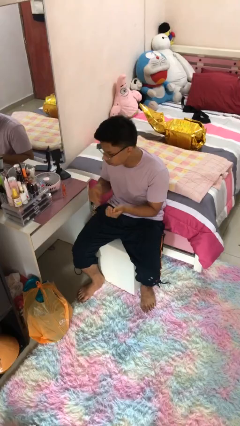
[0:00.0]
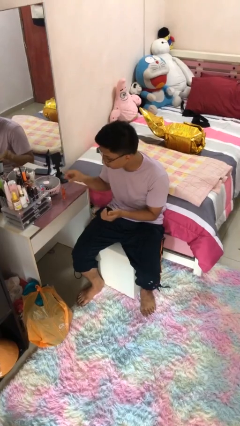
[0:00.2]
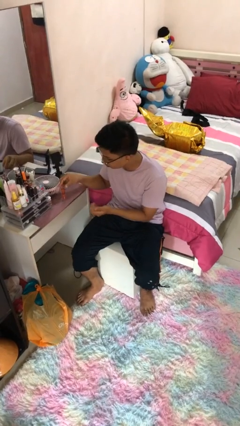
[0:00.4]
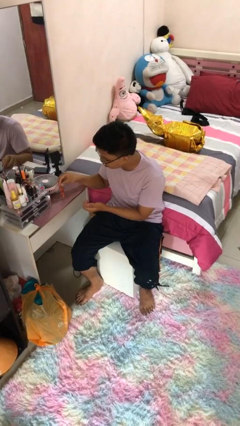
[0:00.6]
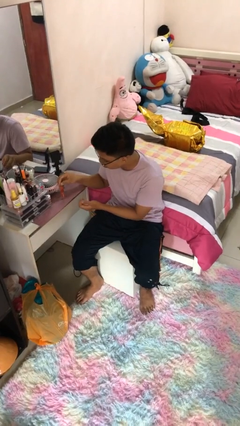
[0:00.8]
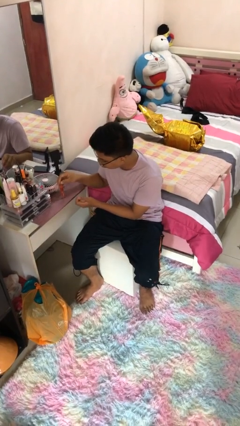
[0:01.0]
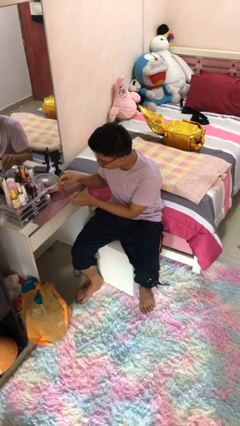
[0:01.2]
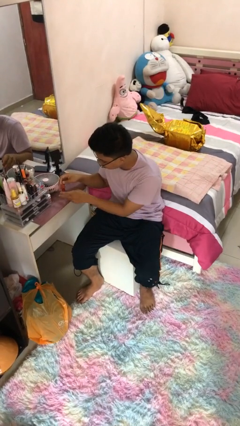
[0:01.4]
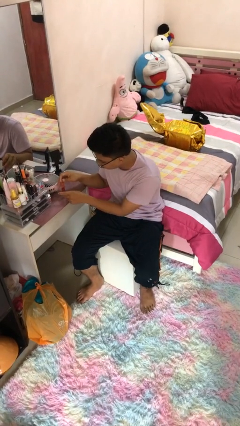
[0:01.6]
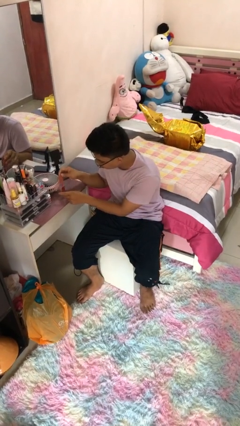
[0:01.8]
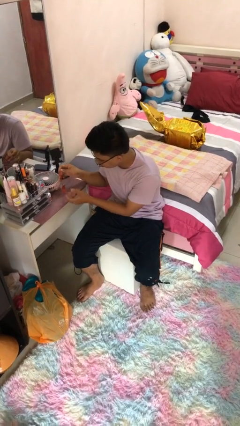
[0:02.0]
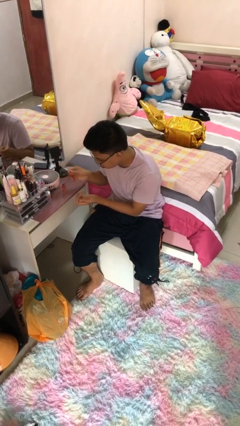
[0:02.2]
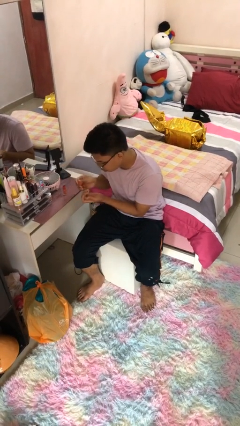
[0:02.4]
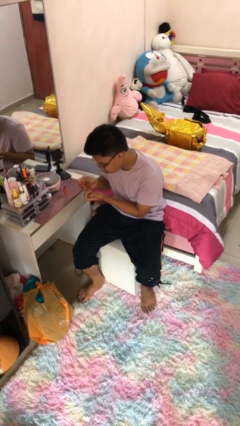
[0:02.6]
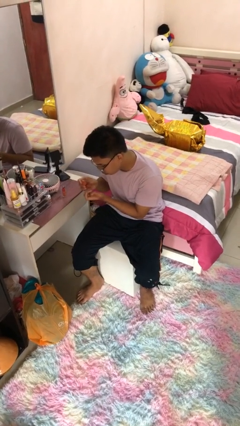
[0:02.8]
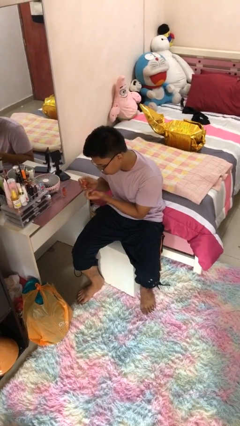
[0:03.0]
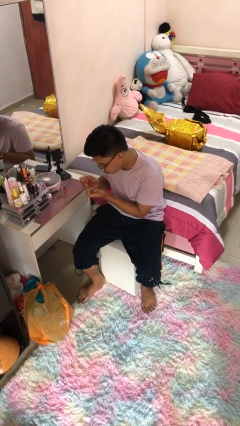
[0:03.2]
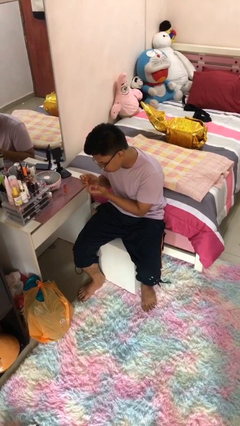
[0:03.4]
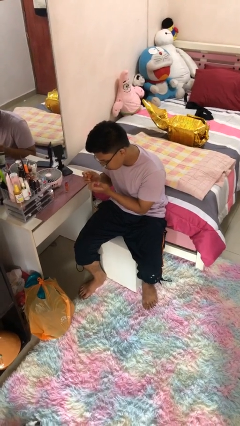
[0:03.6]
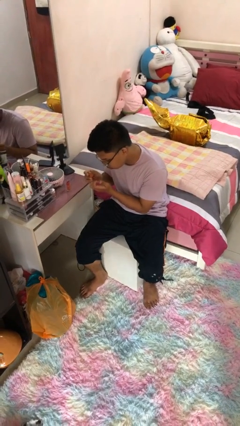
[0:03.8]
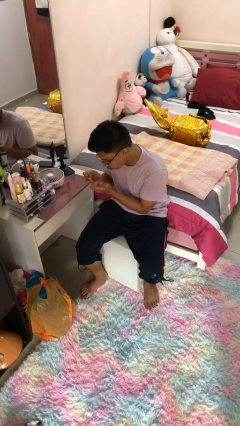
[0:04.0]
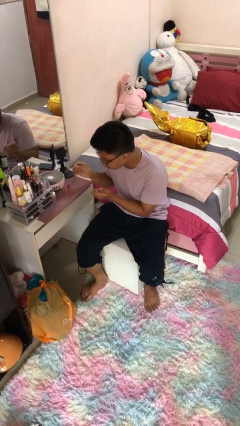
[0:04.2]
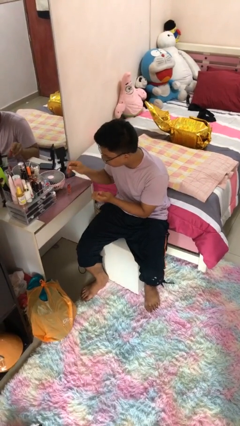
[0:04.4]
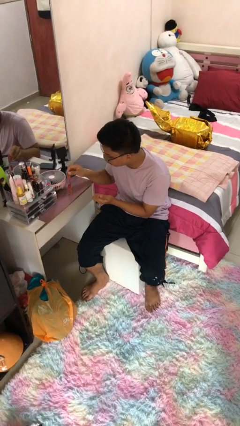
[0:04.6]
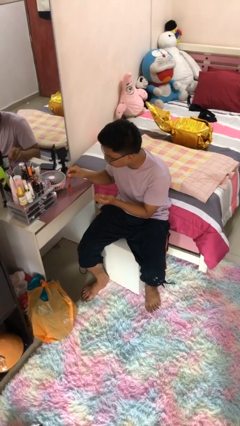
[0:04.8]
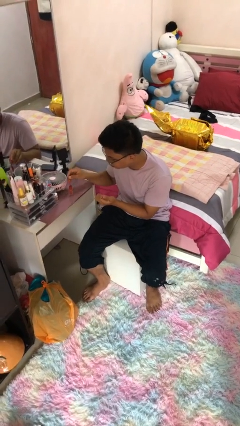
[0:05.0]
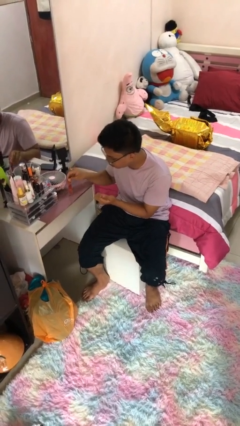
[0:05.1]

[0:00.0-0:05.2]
person paints fingernails

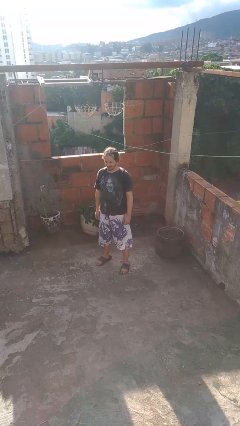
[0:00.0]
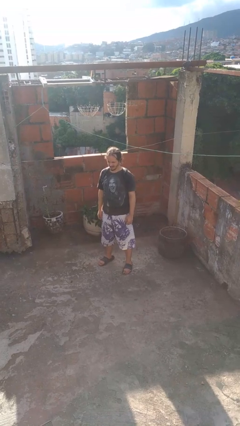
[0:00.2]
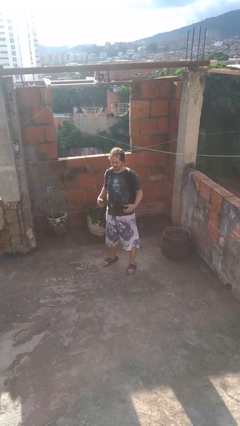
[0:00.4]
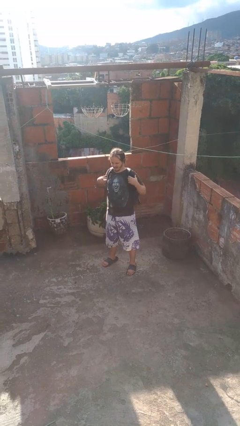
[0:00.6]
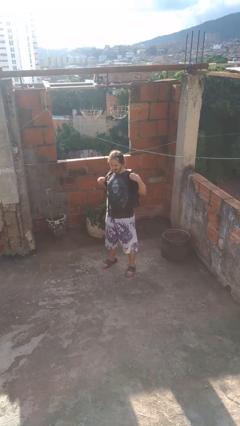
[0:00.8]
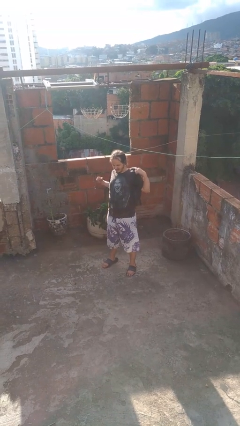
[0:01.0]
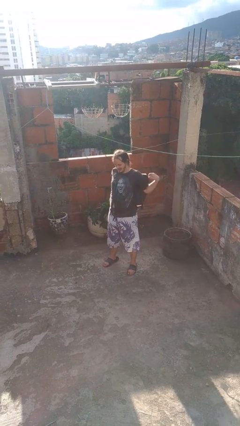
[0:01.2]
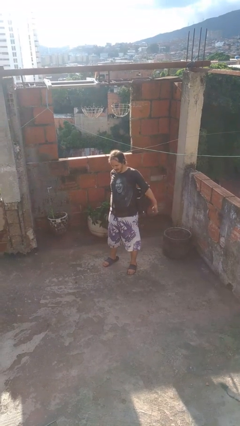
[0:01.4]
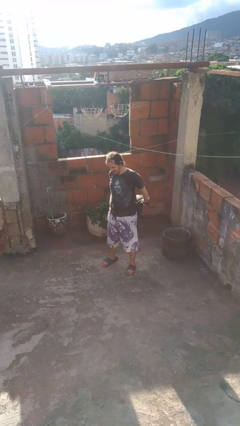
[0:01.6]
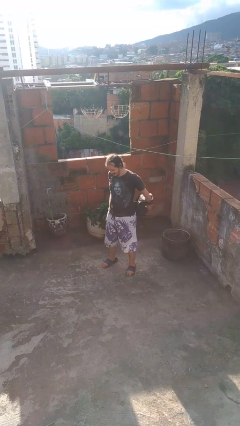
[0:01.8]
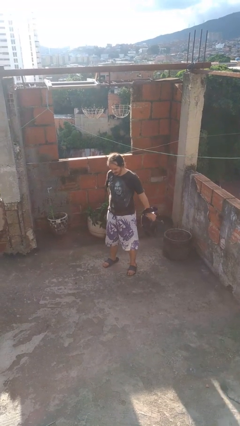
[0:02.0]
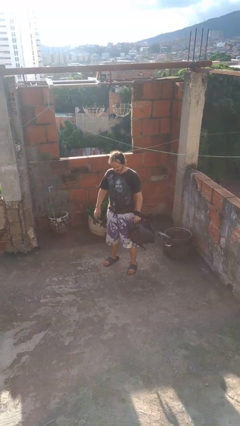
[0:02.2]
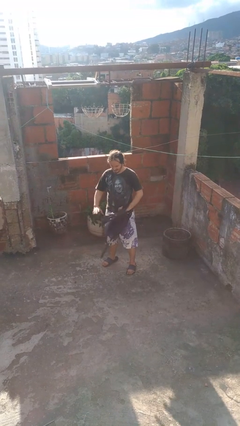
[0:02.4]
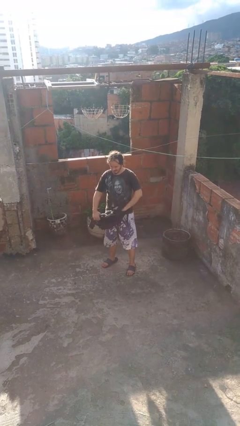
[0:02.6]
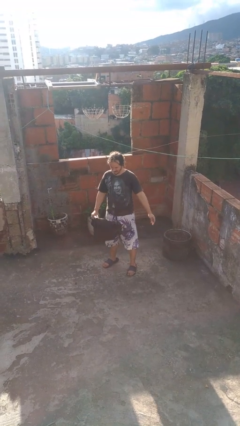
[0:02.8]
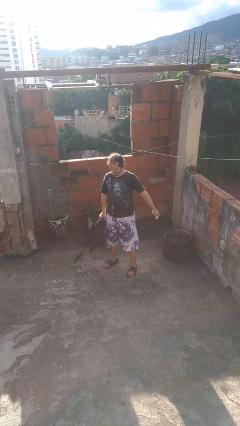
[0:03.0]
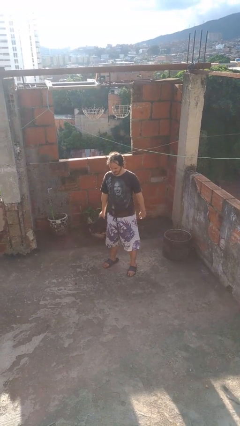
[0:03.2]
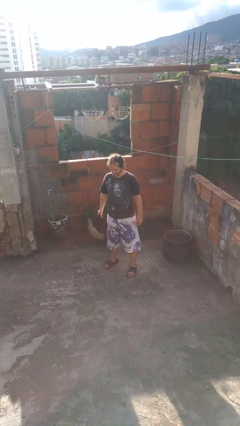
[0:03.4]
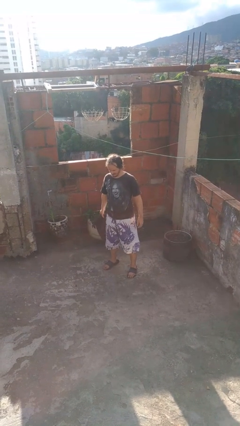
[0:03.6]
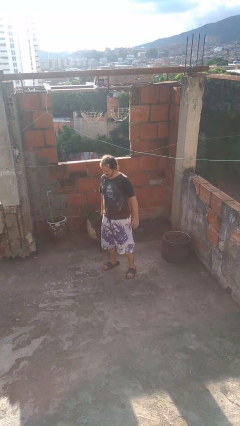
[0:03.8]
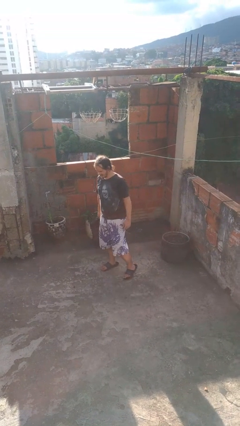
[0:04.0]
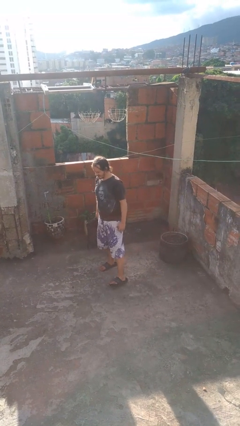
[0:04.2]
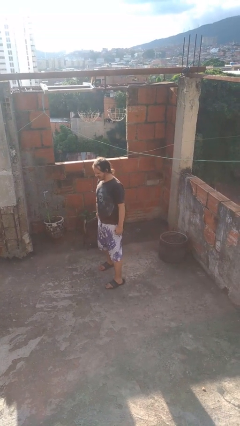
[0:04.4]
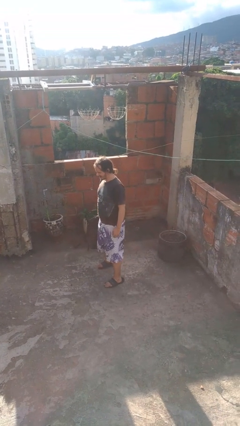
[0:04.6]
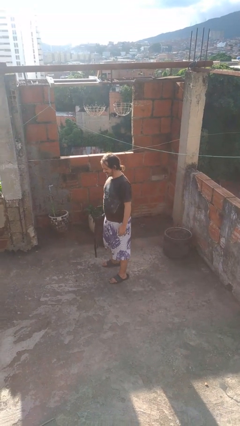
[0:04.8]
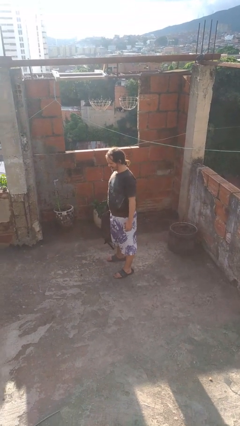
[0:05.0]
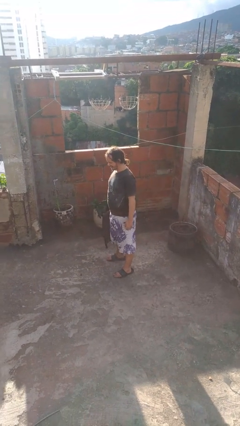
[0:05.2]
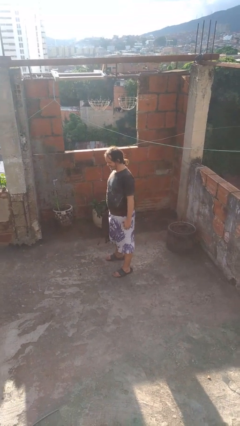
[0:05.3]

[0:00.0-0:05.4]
person takes off backpack

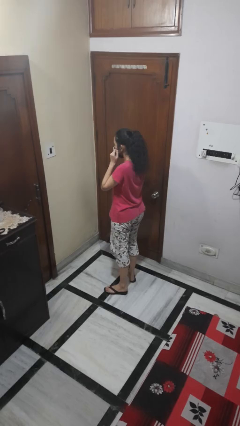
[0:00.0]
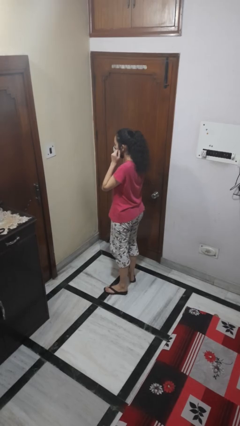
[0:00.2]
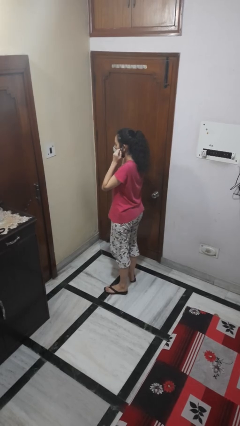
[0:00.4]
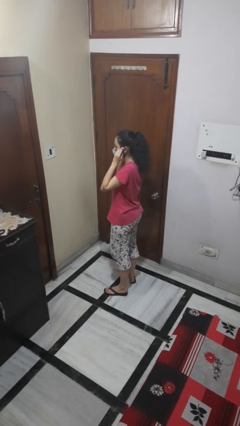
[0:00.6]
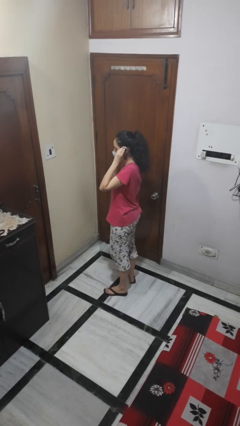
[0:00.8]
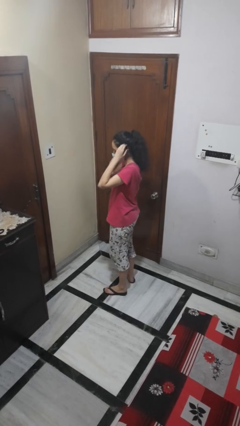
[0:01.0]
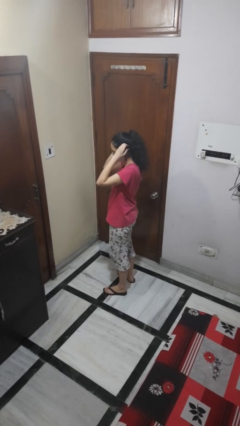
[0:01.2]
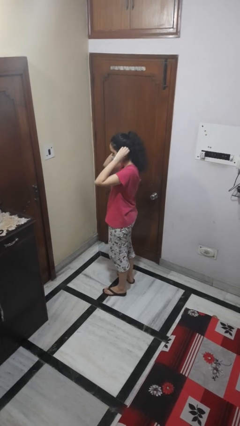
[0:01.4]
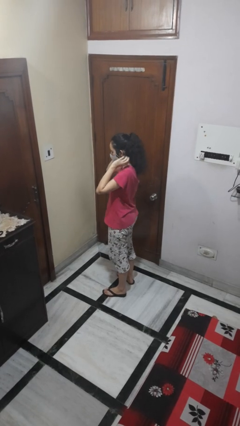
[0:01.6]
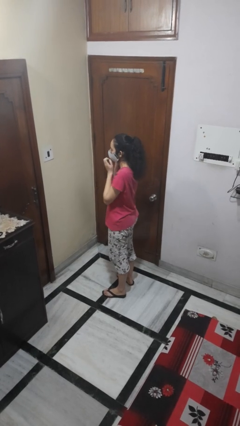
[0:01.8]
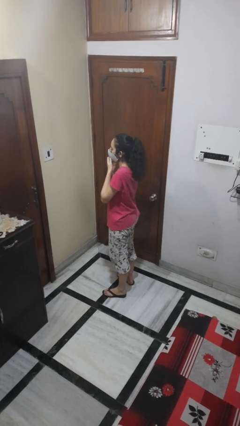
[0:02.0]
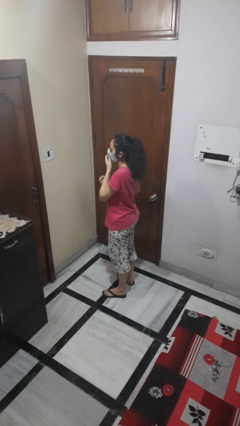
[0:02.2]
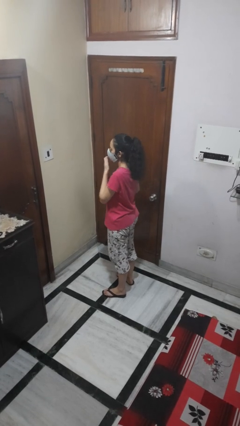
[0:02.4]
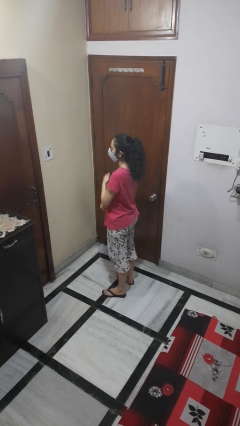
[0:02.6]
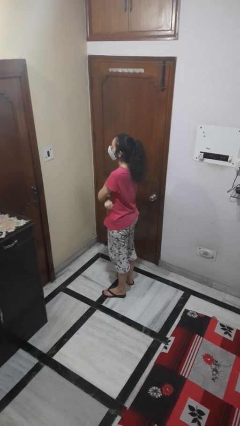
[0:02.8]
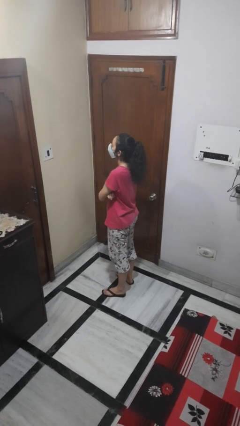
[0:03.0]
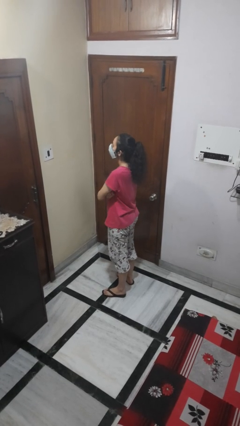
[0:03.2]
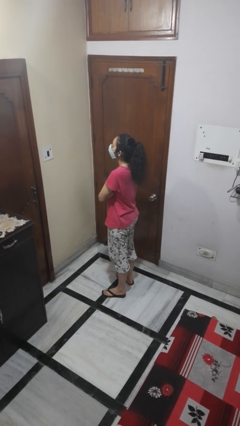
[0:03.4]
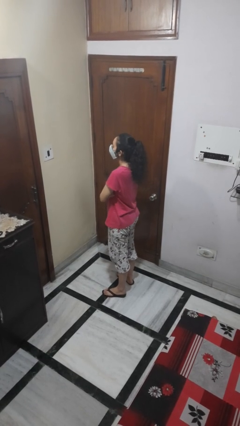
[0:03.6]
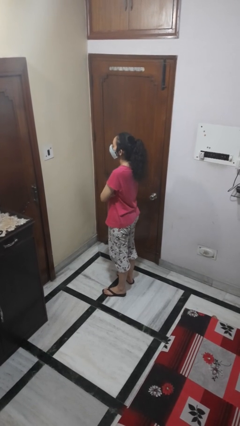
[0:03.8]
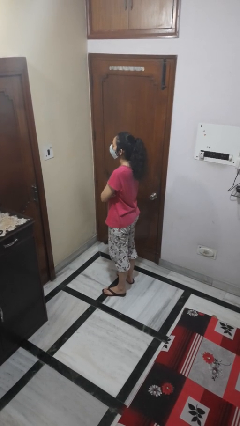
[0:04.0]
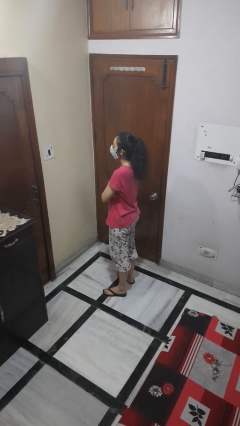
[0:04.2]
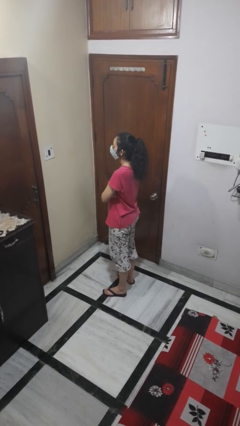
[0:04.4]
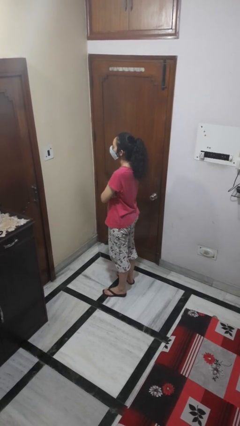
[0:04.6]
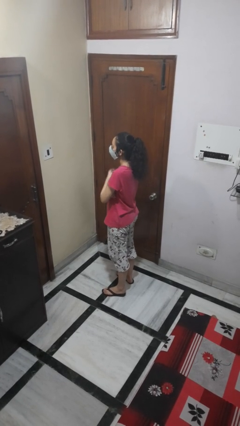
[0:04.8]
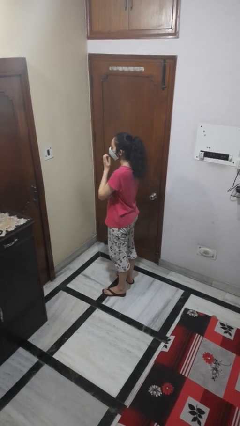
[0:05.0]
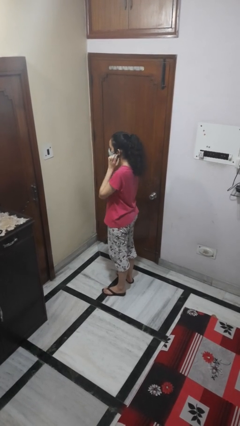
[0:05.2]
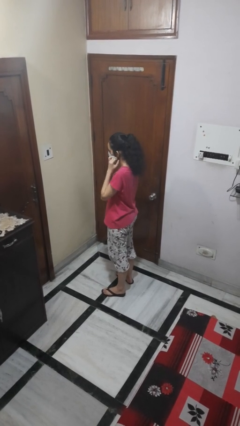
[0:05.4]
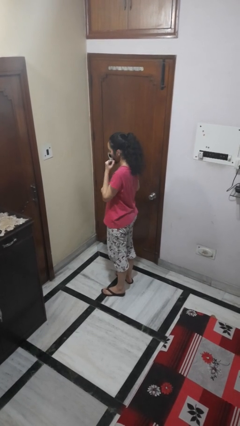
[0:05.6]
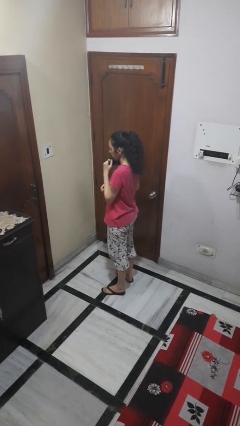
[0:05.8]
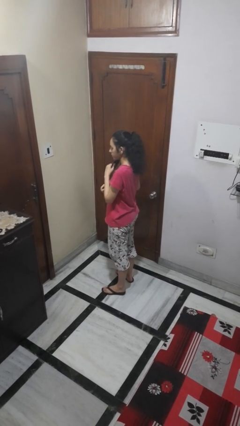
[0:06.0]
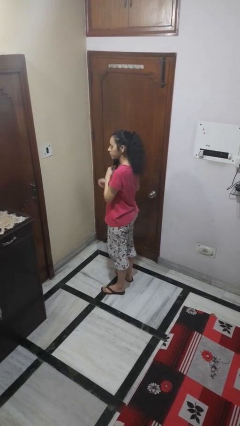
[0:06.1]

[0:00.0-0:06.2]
person puts on facemask

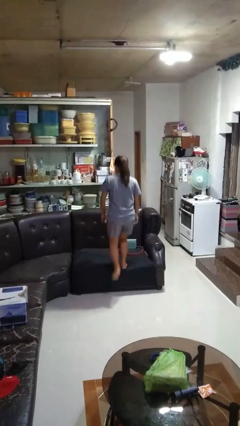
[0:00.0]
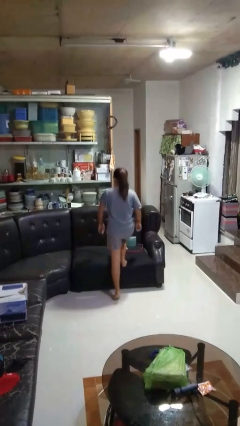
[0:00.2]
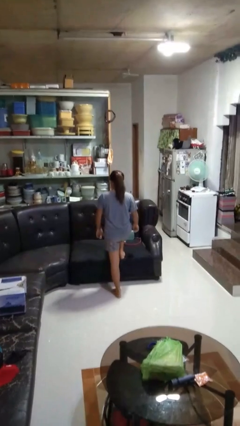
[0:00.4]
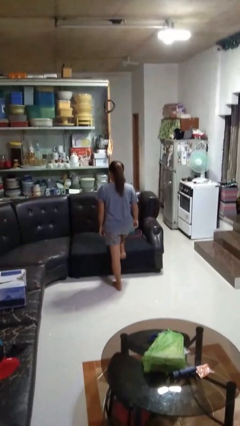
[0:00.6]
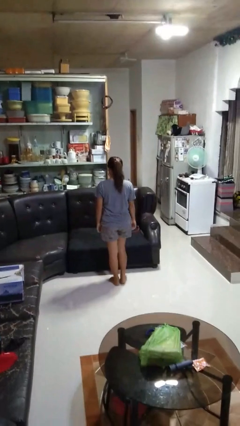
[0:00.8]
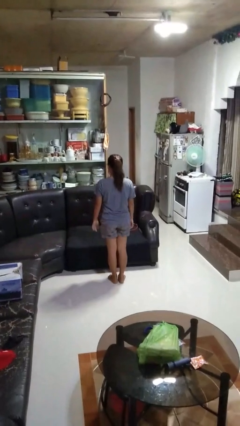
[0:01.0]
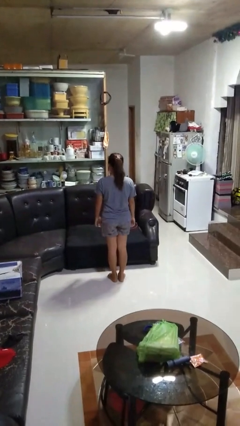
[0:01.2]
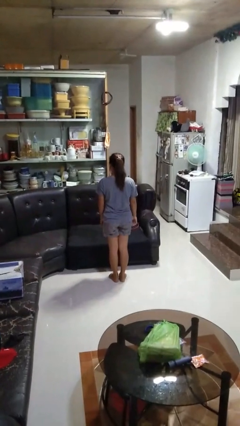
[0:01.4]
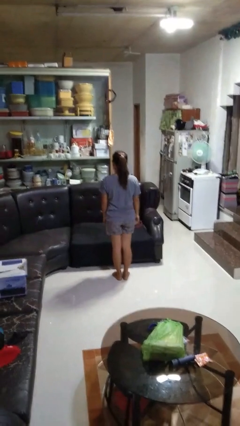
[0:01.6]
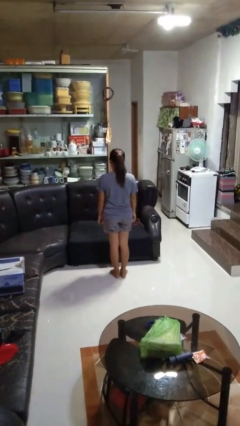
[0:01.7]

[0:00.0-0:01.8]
person climbs off couch
